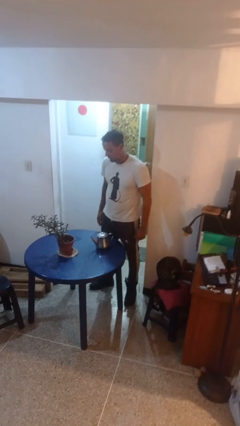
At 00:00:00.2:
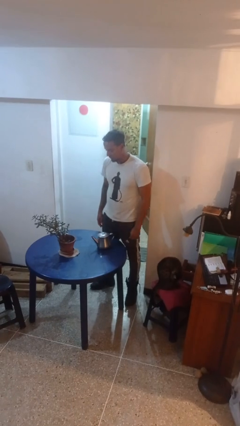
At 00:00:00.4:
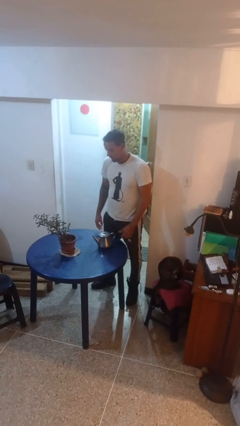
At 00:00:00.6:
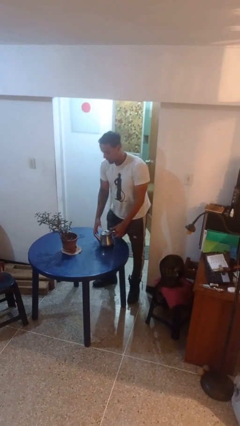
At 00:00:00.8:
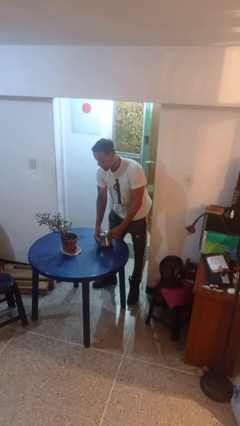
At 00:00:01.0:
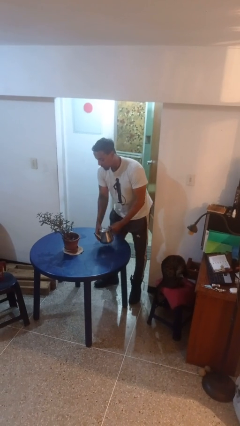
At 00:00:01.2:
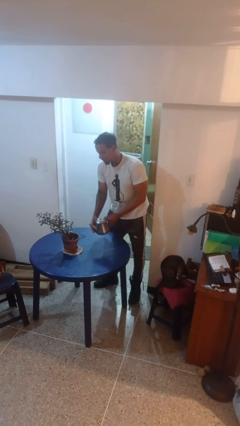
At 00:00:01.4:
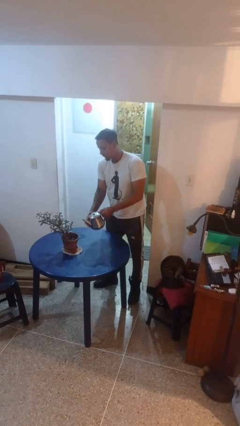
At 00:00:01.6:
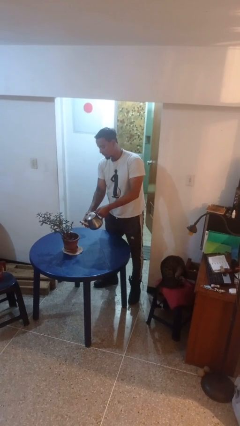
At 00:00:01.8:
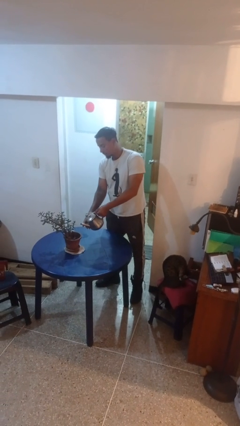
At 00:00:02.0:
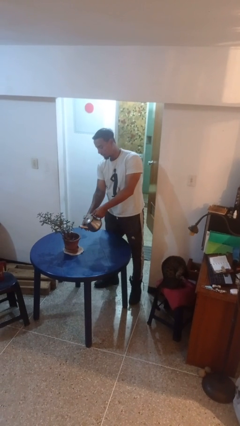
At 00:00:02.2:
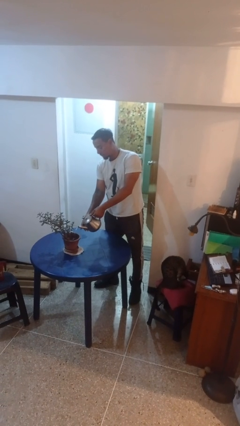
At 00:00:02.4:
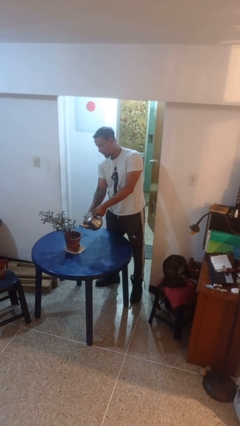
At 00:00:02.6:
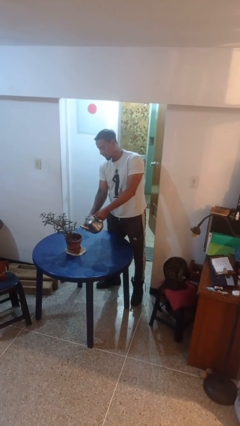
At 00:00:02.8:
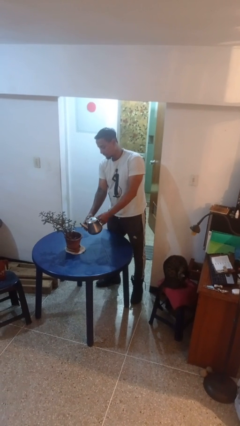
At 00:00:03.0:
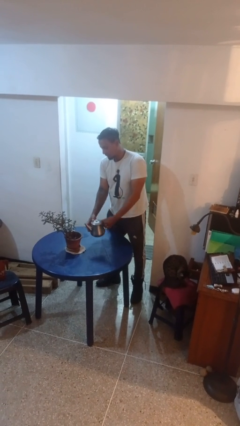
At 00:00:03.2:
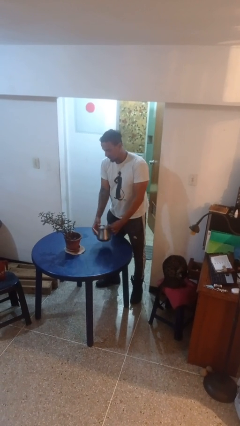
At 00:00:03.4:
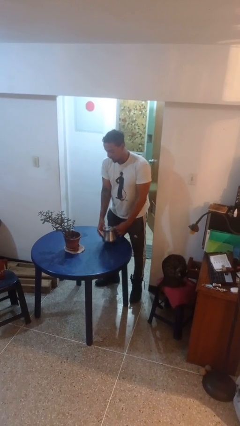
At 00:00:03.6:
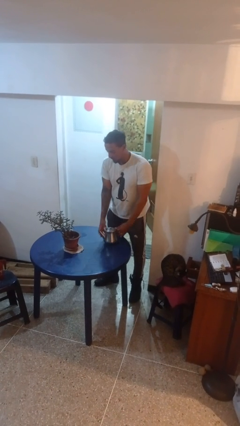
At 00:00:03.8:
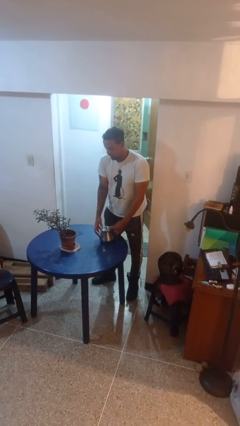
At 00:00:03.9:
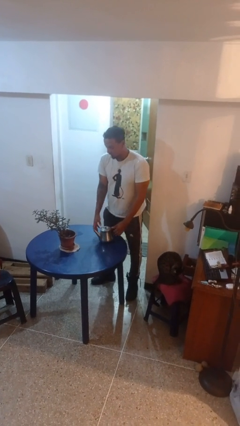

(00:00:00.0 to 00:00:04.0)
person waters houseplant

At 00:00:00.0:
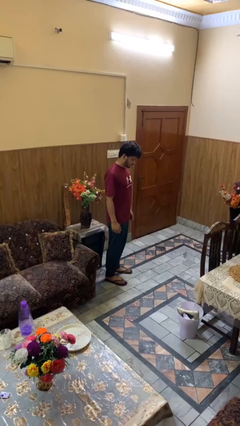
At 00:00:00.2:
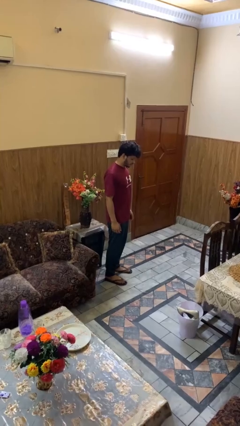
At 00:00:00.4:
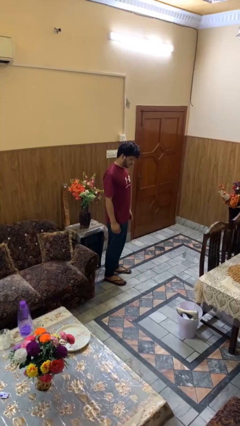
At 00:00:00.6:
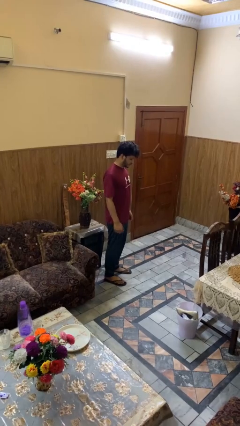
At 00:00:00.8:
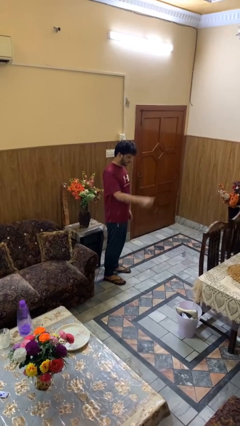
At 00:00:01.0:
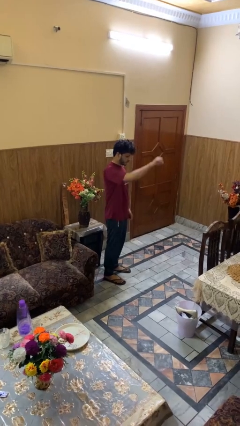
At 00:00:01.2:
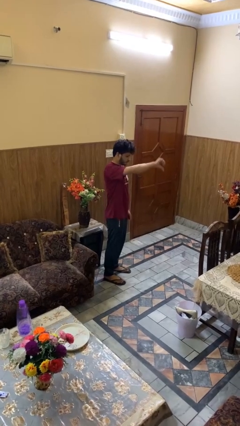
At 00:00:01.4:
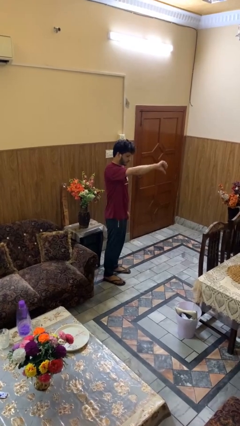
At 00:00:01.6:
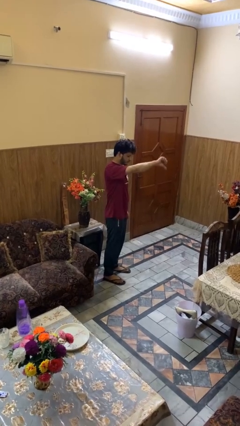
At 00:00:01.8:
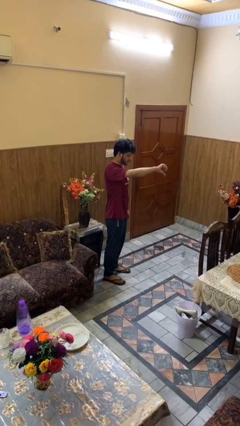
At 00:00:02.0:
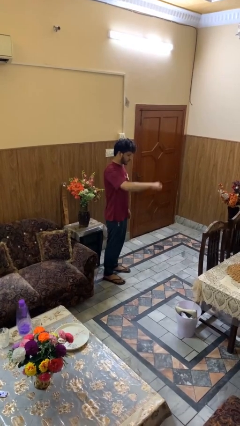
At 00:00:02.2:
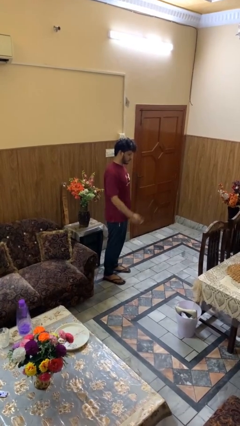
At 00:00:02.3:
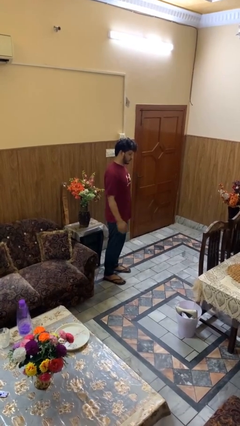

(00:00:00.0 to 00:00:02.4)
person gestures thumbs down

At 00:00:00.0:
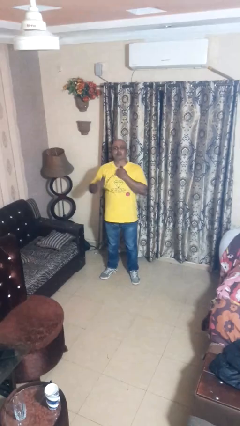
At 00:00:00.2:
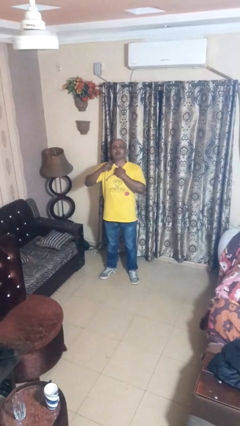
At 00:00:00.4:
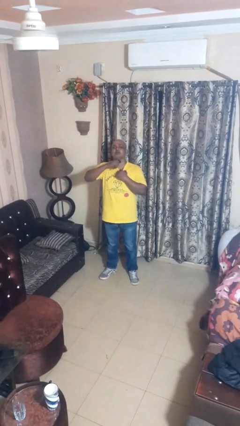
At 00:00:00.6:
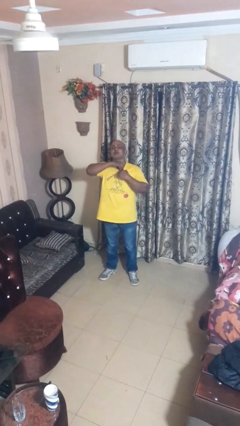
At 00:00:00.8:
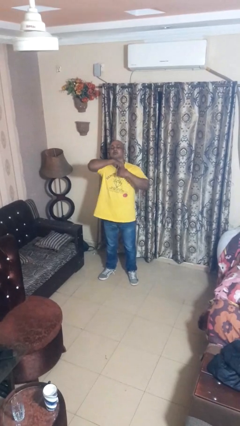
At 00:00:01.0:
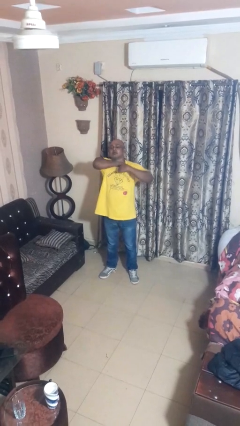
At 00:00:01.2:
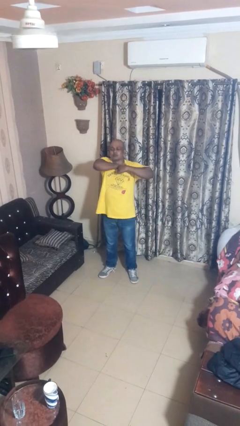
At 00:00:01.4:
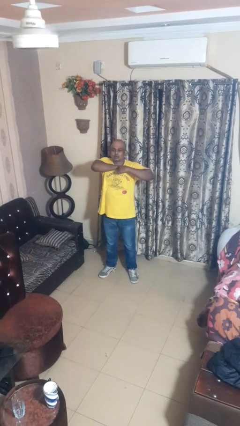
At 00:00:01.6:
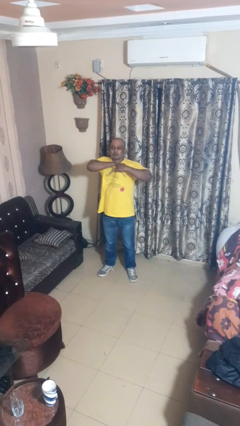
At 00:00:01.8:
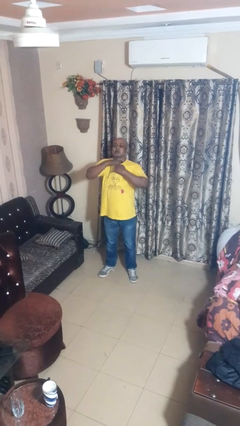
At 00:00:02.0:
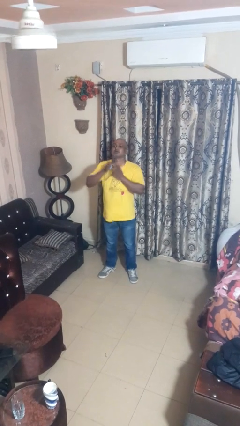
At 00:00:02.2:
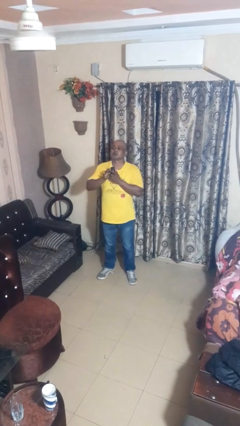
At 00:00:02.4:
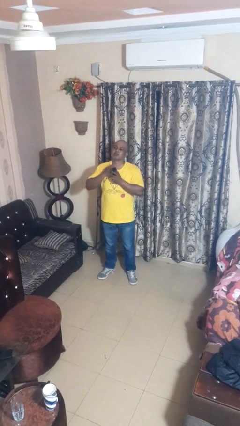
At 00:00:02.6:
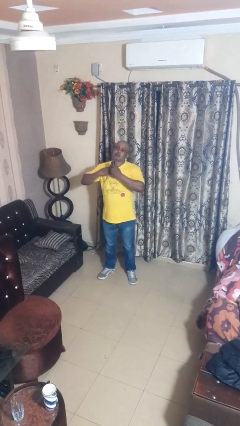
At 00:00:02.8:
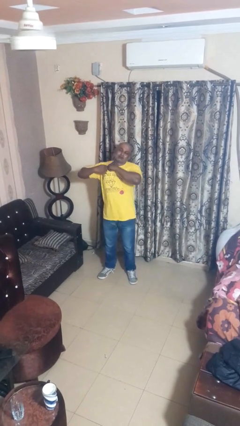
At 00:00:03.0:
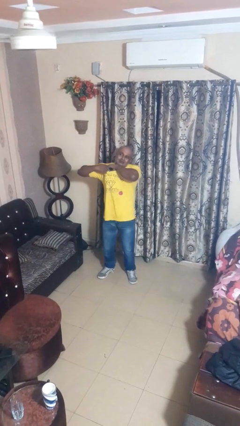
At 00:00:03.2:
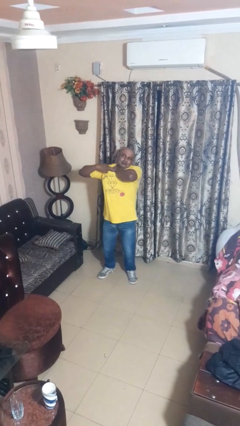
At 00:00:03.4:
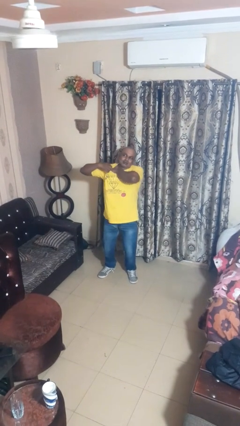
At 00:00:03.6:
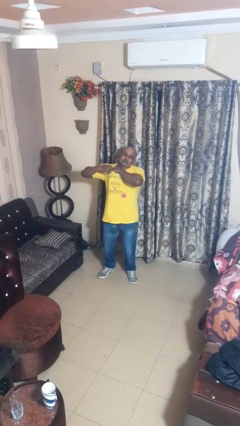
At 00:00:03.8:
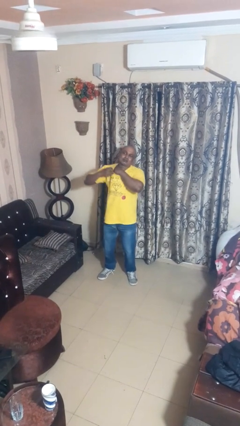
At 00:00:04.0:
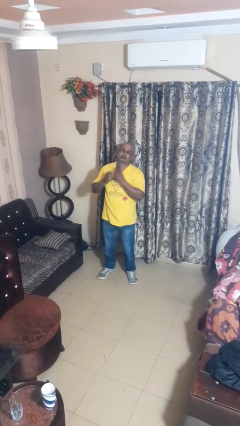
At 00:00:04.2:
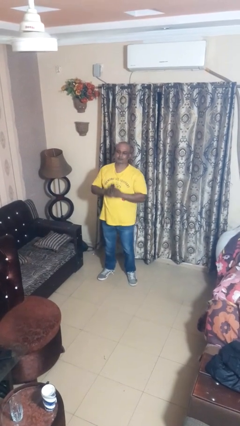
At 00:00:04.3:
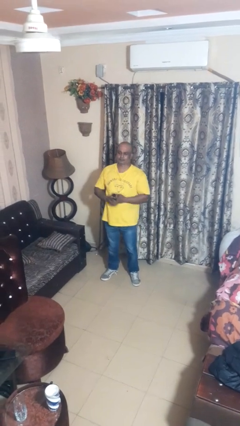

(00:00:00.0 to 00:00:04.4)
person applies deodorant

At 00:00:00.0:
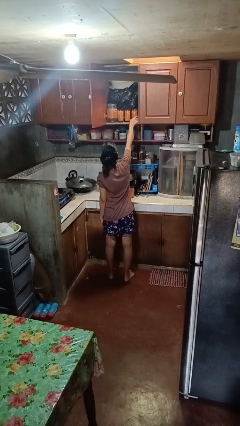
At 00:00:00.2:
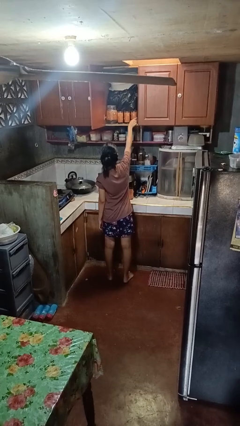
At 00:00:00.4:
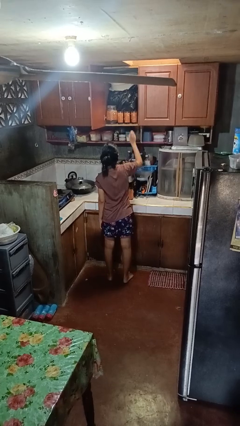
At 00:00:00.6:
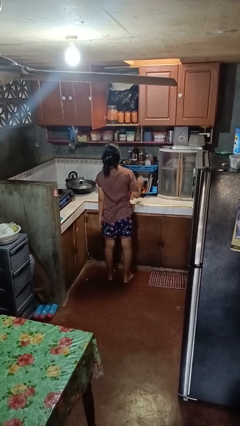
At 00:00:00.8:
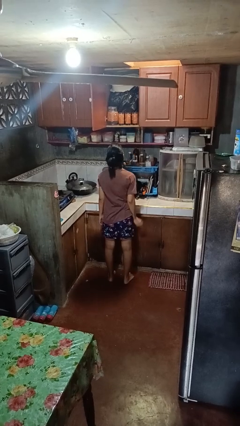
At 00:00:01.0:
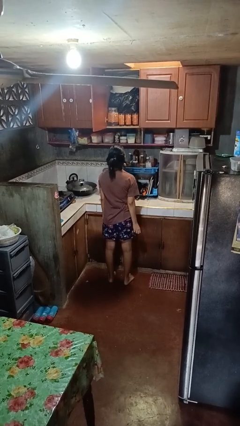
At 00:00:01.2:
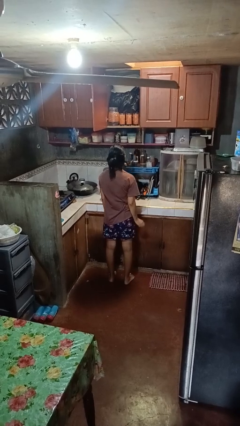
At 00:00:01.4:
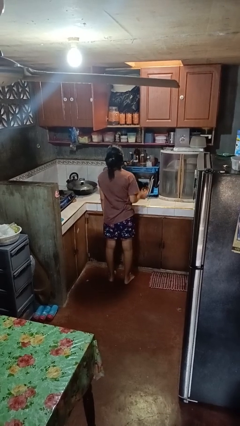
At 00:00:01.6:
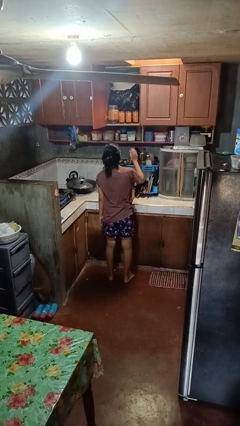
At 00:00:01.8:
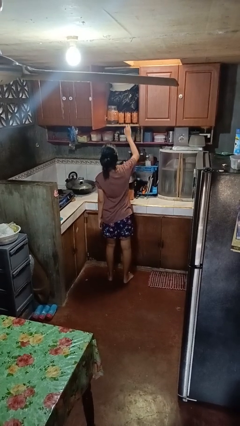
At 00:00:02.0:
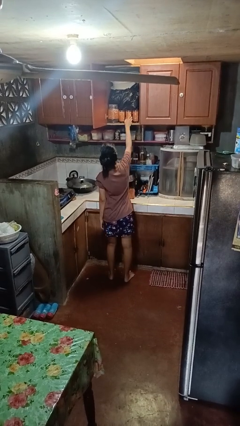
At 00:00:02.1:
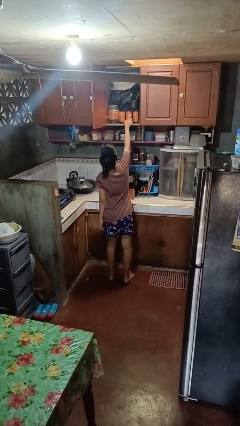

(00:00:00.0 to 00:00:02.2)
person puts object in cabinet

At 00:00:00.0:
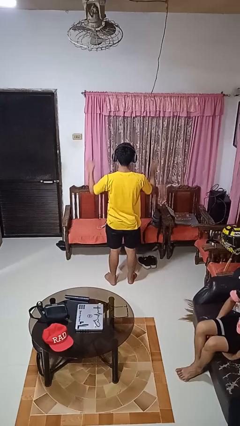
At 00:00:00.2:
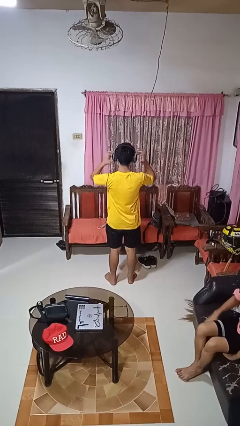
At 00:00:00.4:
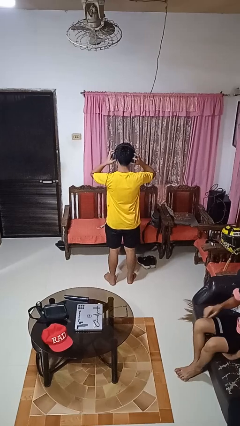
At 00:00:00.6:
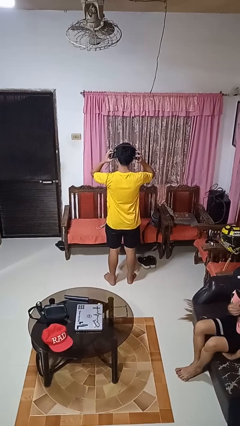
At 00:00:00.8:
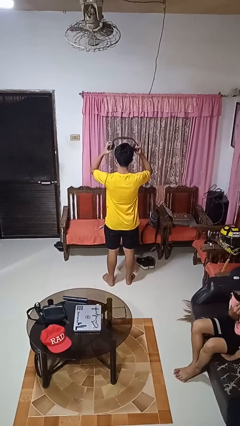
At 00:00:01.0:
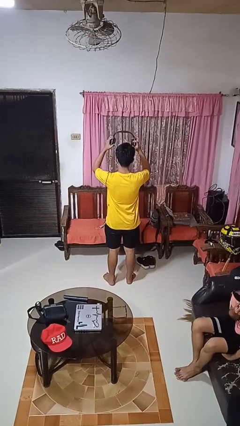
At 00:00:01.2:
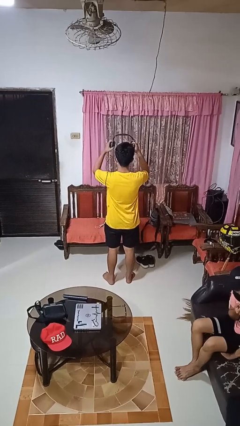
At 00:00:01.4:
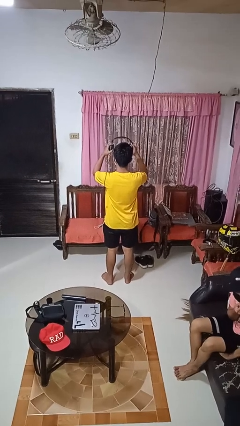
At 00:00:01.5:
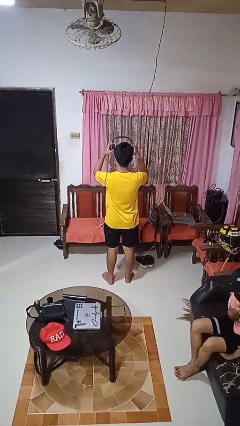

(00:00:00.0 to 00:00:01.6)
person takes off headphones

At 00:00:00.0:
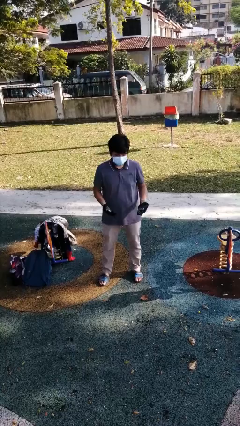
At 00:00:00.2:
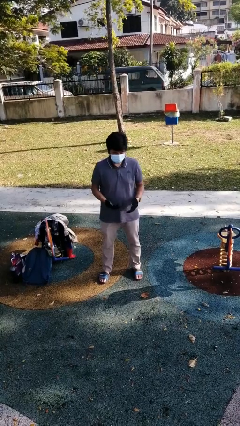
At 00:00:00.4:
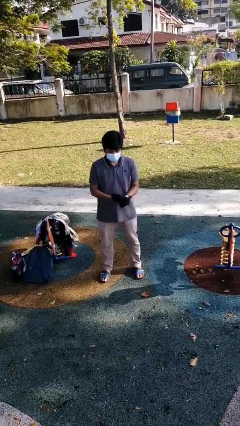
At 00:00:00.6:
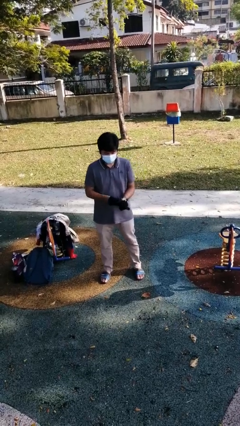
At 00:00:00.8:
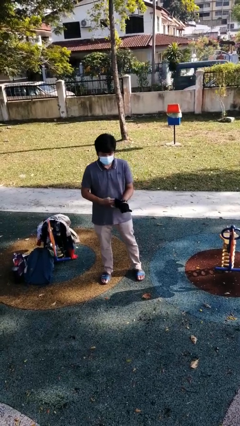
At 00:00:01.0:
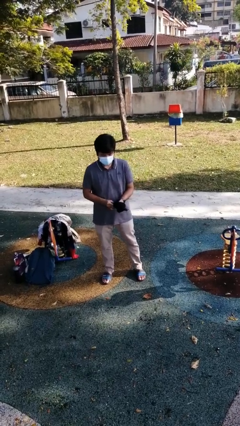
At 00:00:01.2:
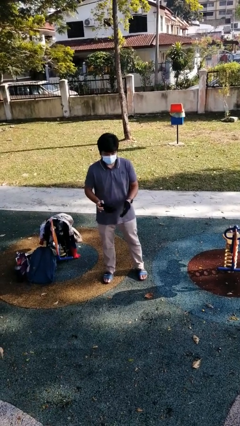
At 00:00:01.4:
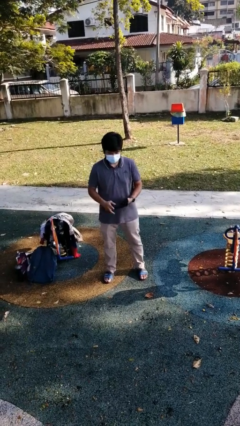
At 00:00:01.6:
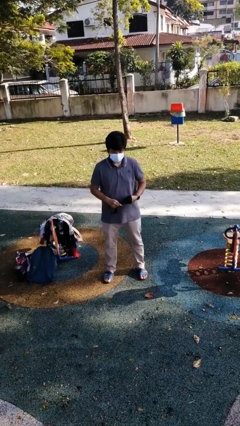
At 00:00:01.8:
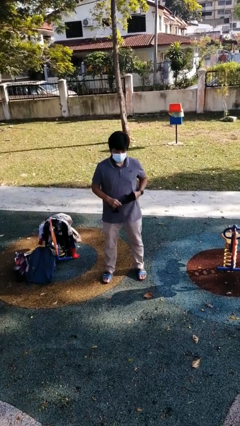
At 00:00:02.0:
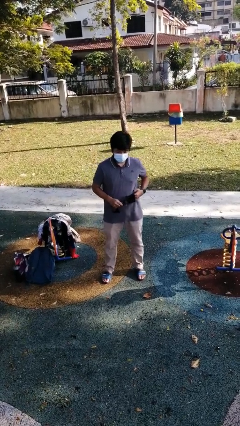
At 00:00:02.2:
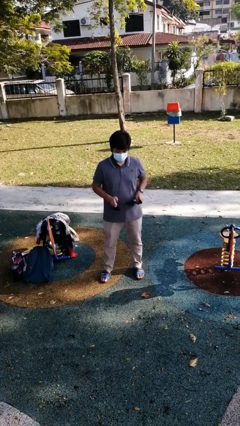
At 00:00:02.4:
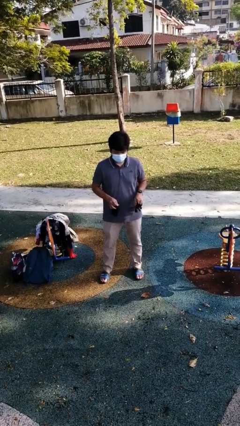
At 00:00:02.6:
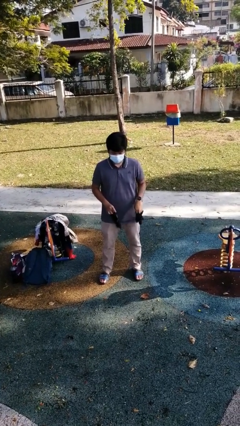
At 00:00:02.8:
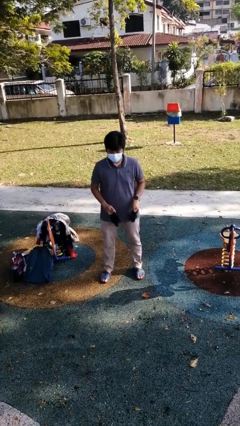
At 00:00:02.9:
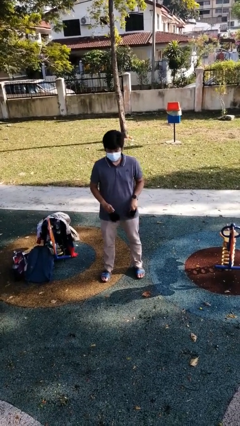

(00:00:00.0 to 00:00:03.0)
person takes off gloves
